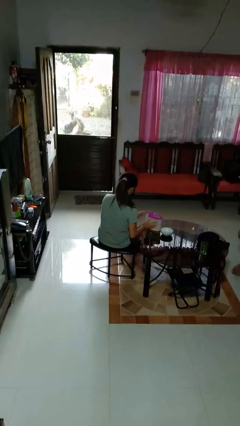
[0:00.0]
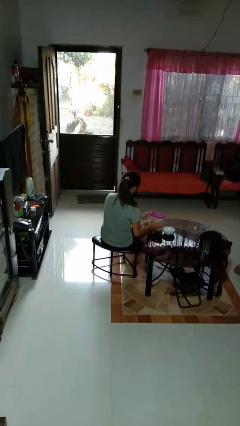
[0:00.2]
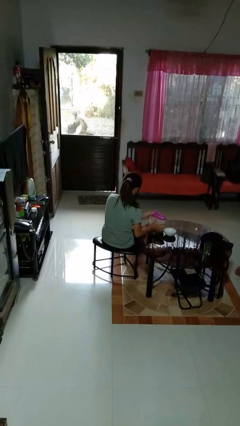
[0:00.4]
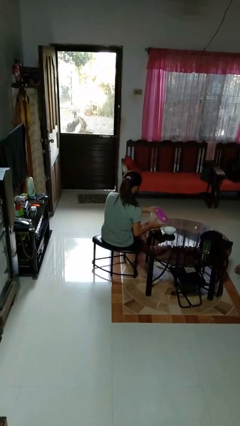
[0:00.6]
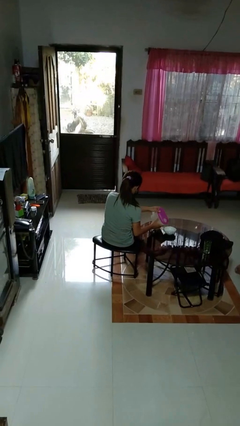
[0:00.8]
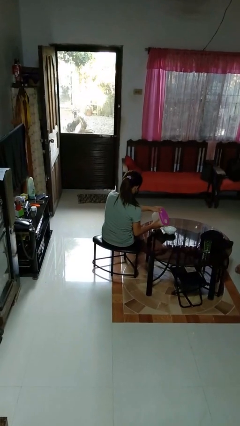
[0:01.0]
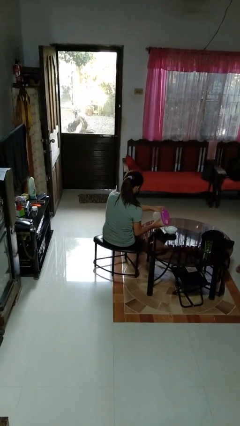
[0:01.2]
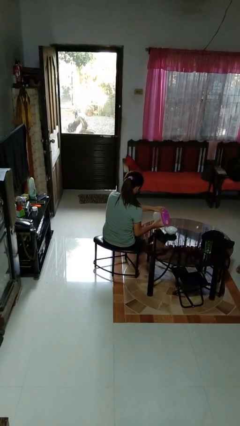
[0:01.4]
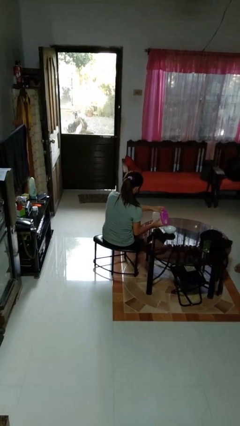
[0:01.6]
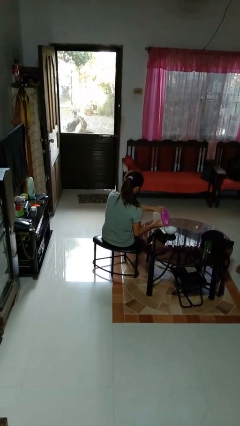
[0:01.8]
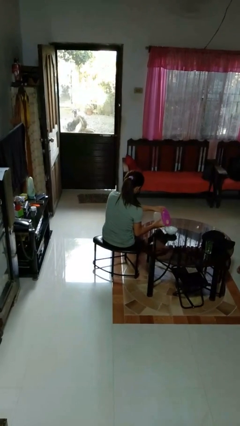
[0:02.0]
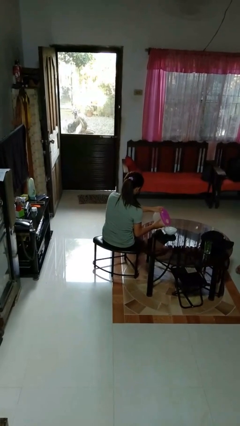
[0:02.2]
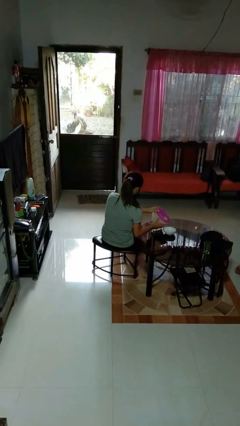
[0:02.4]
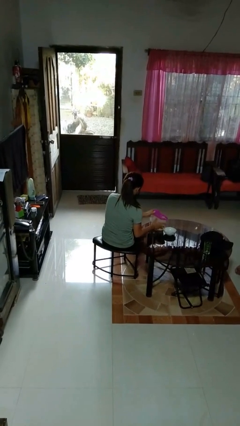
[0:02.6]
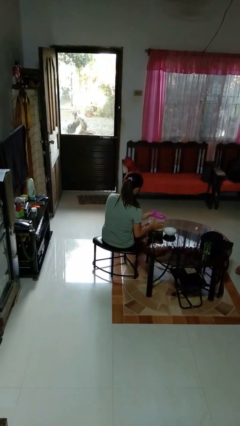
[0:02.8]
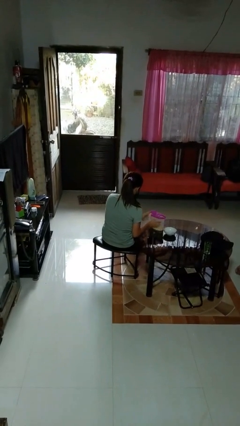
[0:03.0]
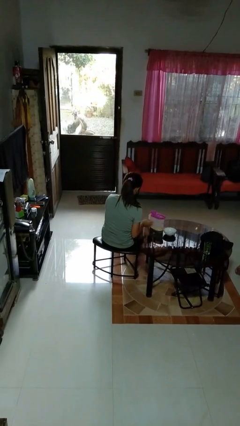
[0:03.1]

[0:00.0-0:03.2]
person pours into bowl

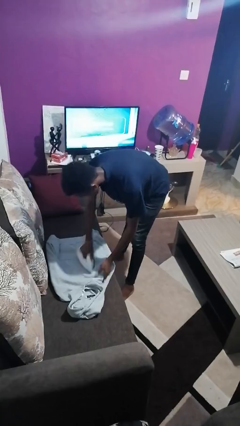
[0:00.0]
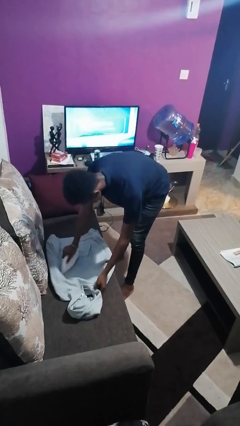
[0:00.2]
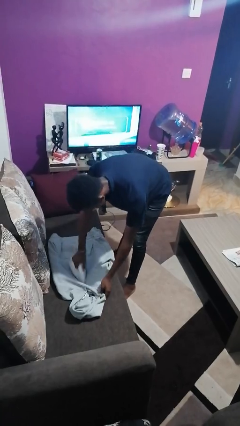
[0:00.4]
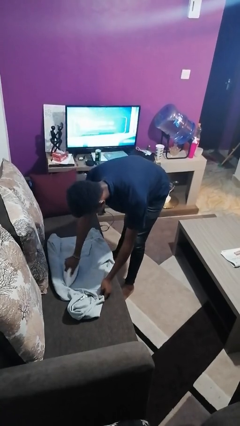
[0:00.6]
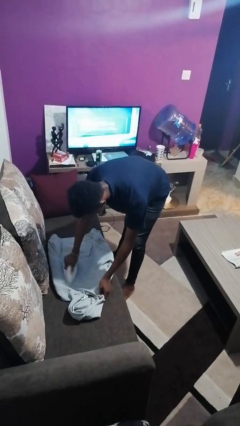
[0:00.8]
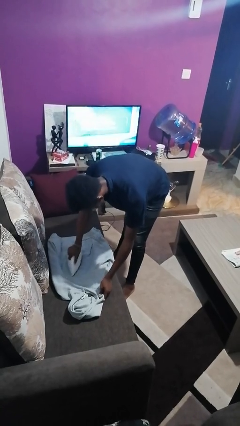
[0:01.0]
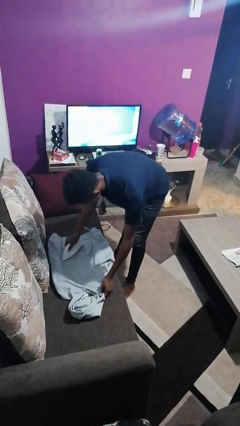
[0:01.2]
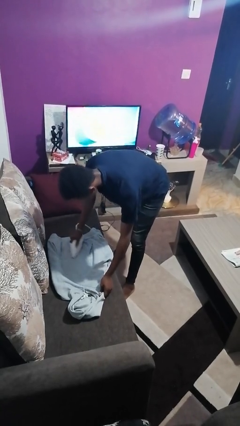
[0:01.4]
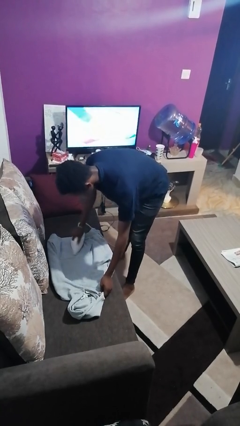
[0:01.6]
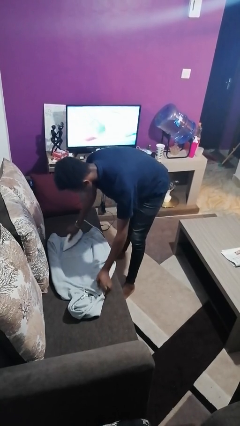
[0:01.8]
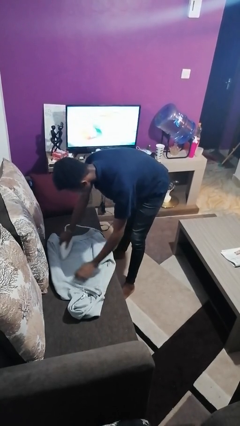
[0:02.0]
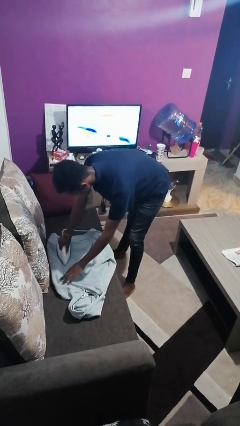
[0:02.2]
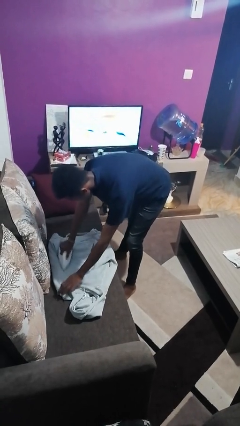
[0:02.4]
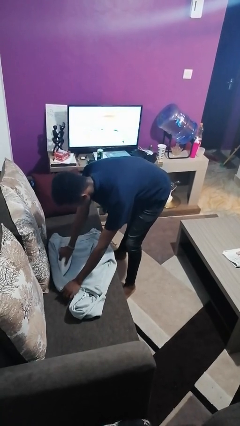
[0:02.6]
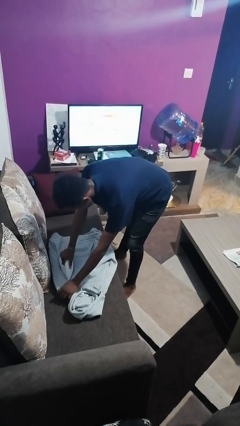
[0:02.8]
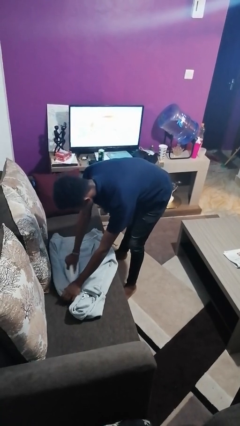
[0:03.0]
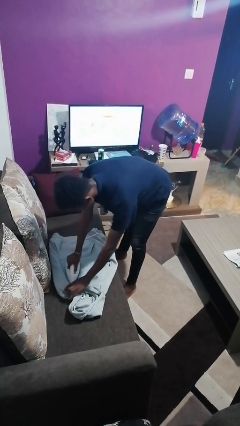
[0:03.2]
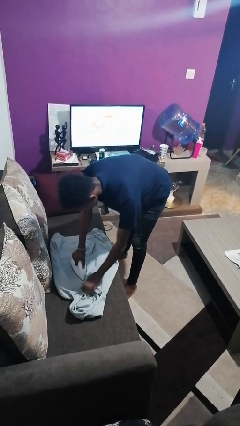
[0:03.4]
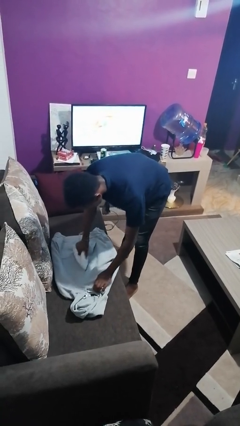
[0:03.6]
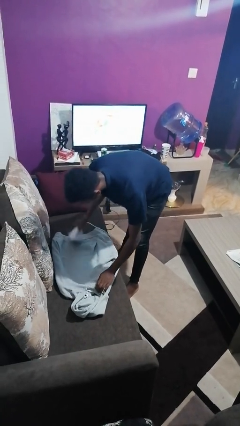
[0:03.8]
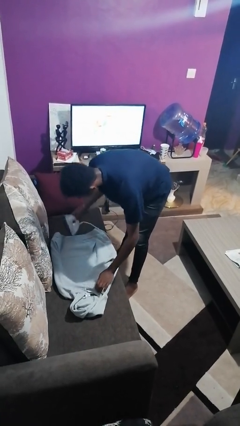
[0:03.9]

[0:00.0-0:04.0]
person irons clothes

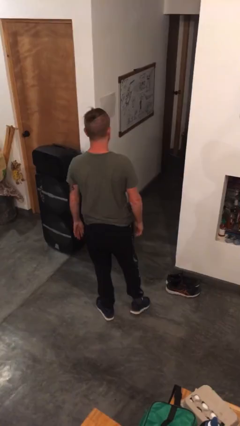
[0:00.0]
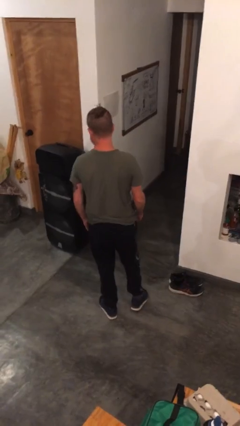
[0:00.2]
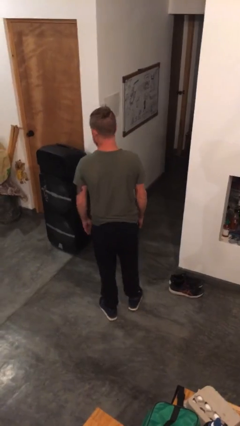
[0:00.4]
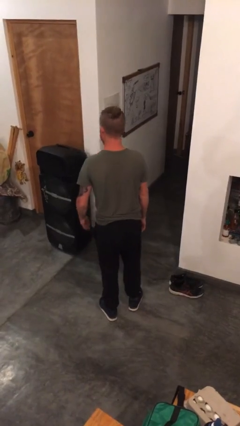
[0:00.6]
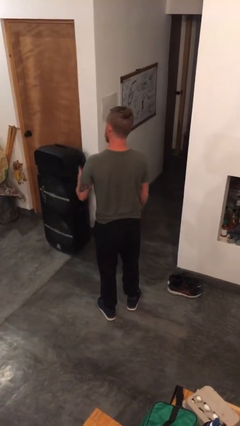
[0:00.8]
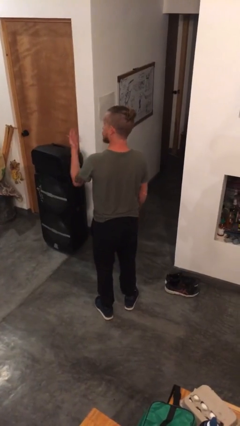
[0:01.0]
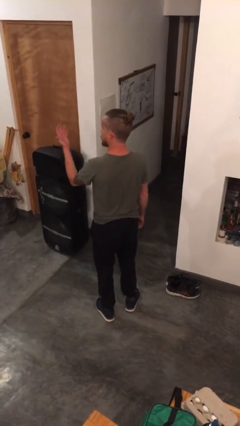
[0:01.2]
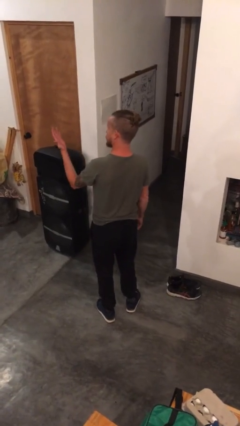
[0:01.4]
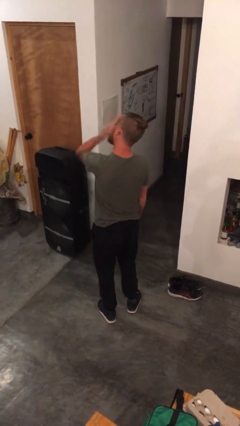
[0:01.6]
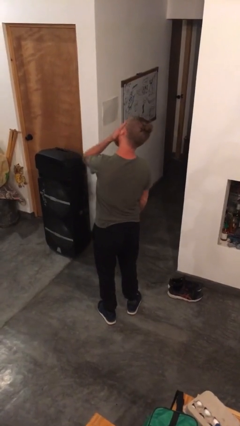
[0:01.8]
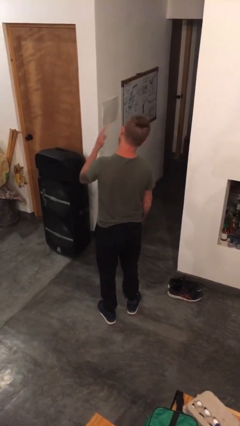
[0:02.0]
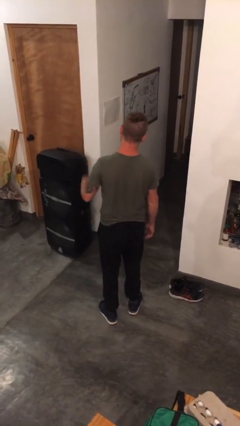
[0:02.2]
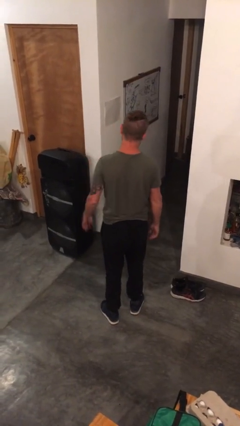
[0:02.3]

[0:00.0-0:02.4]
person swats bug

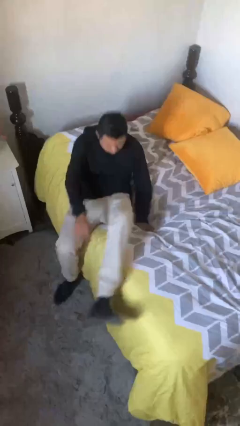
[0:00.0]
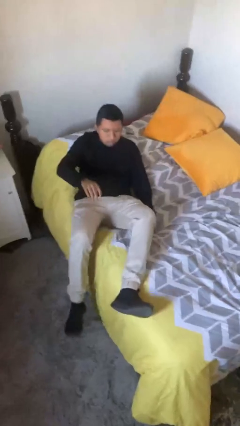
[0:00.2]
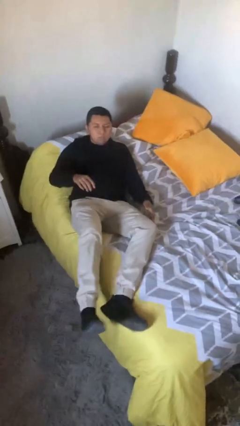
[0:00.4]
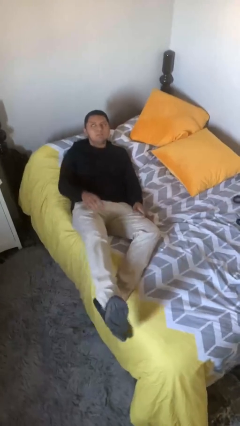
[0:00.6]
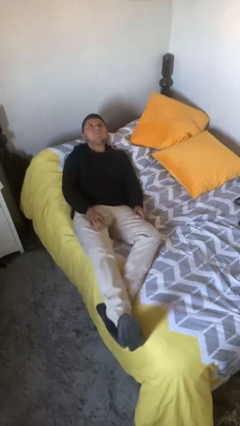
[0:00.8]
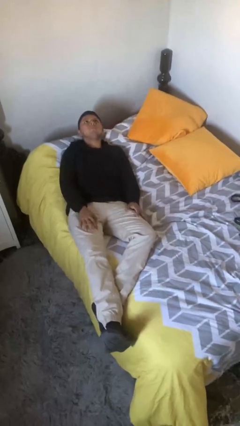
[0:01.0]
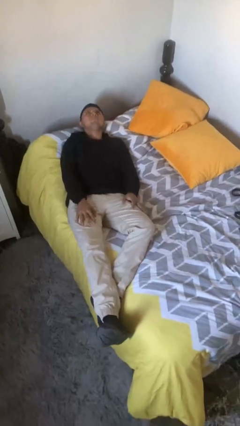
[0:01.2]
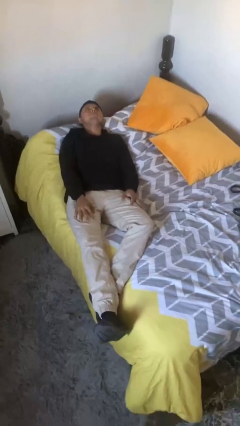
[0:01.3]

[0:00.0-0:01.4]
person lies down on bed

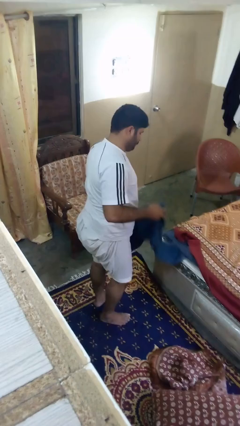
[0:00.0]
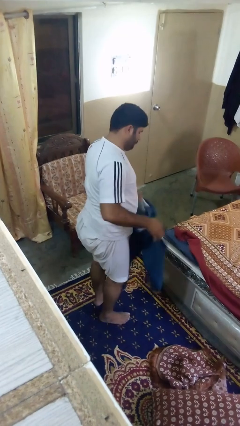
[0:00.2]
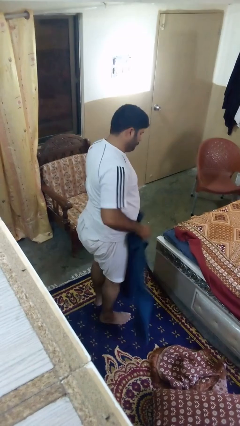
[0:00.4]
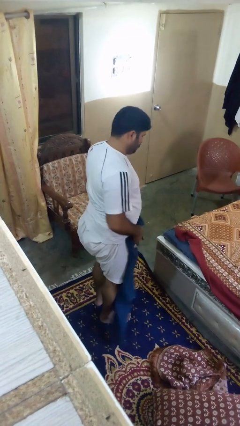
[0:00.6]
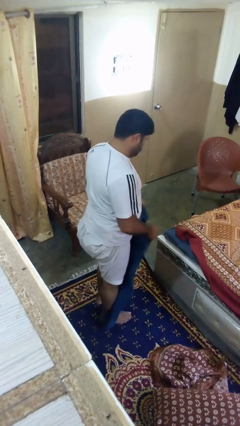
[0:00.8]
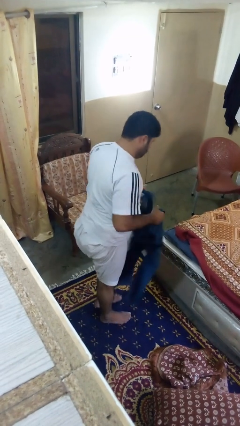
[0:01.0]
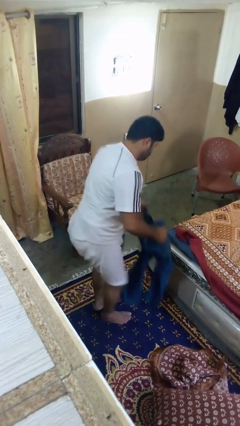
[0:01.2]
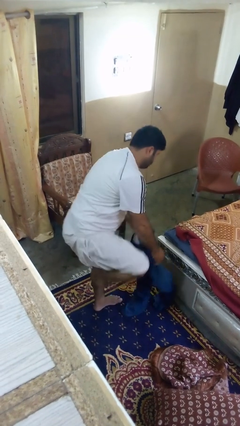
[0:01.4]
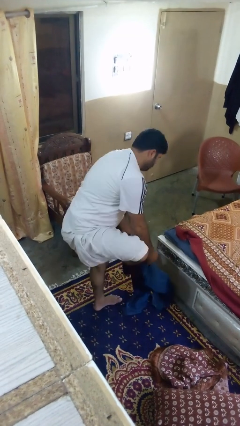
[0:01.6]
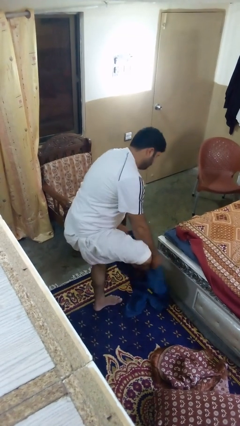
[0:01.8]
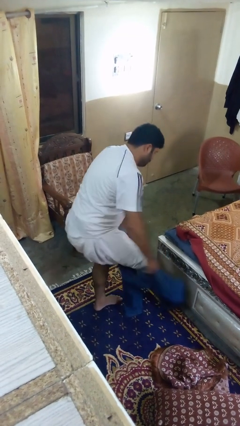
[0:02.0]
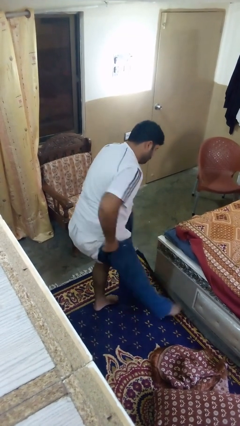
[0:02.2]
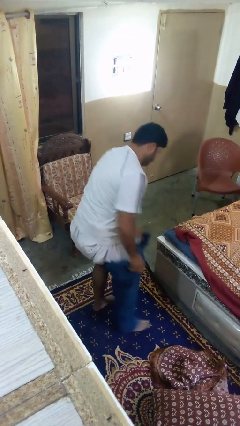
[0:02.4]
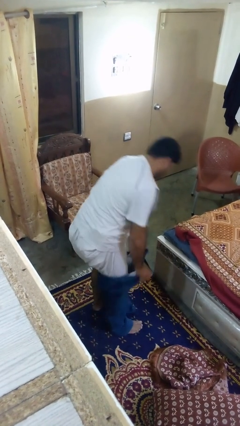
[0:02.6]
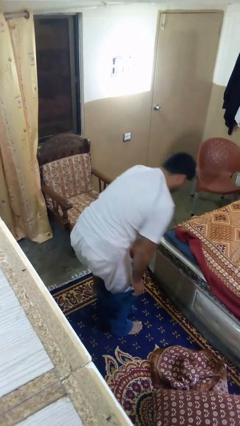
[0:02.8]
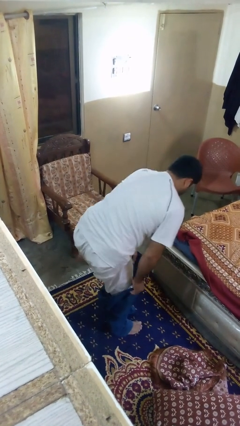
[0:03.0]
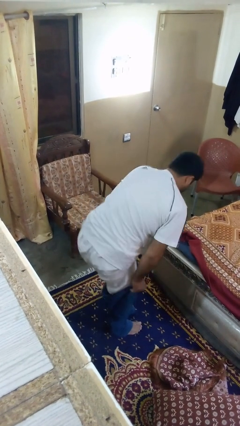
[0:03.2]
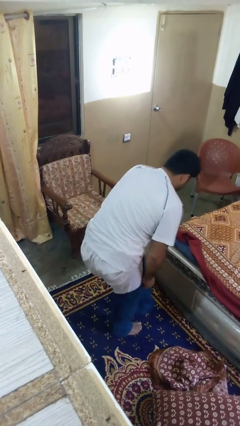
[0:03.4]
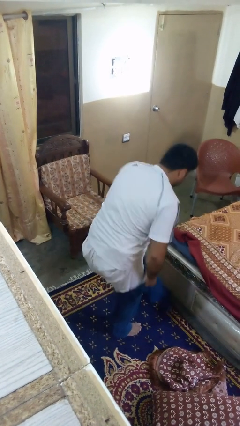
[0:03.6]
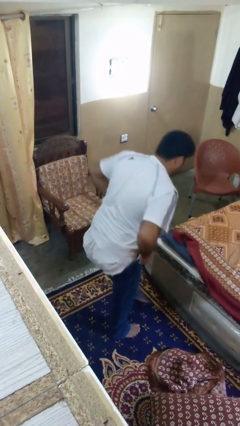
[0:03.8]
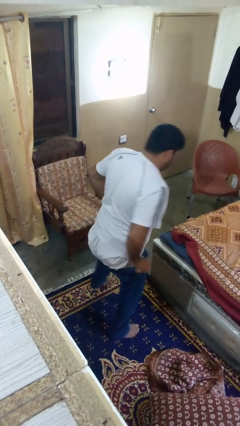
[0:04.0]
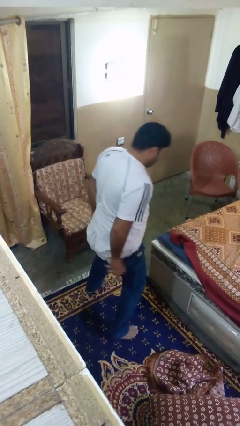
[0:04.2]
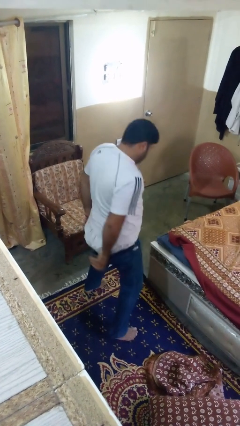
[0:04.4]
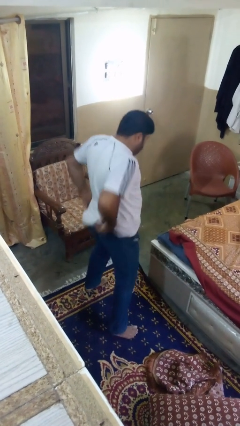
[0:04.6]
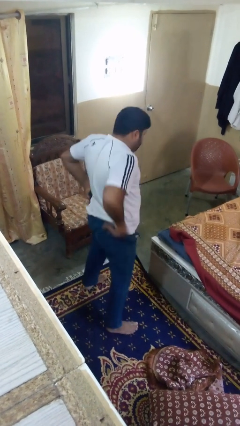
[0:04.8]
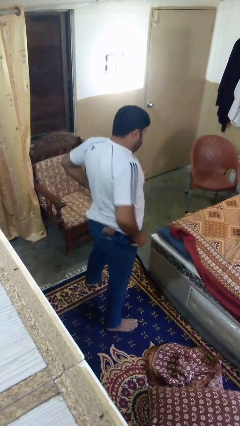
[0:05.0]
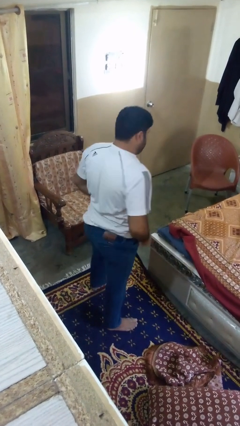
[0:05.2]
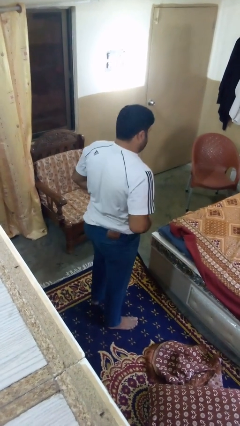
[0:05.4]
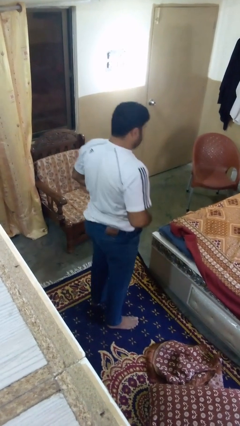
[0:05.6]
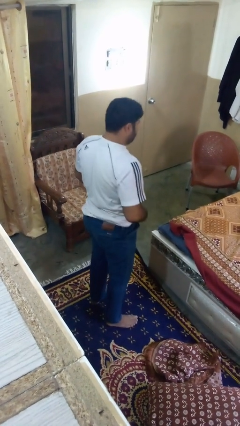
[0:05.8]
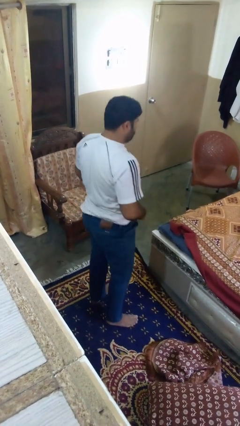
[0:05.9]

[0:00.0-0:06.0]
person puts on pants

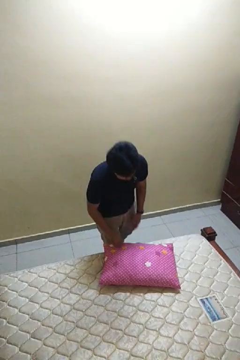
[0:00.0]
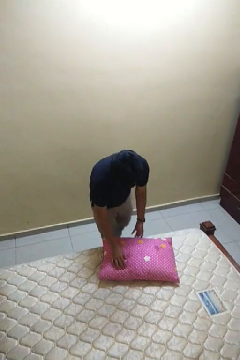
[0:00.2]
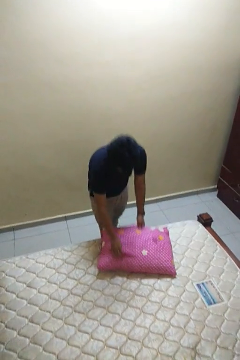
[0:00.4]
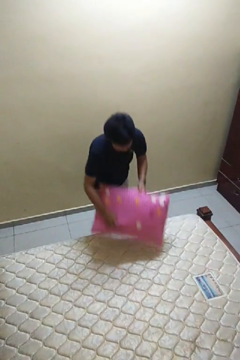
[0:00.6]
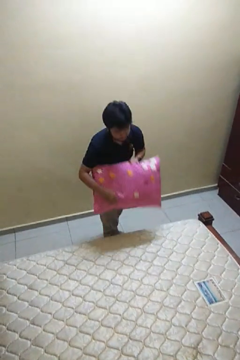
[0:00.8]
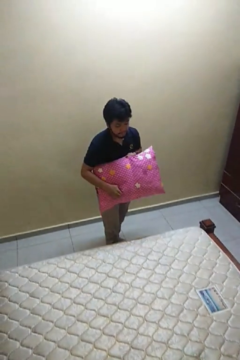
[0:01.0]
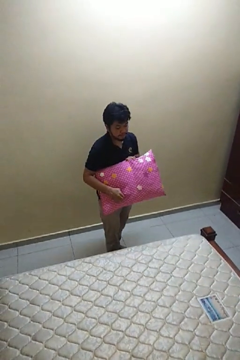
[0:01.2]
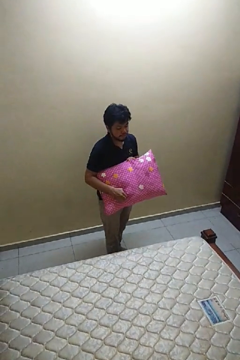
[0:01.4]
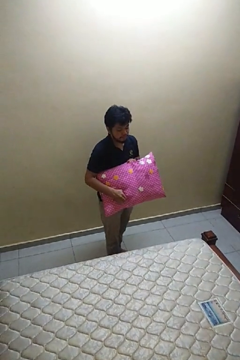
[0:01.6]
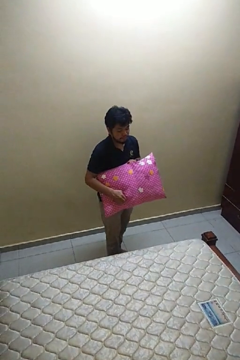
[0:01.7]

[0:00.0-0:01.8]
person picks up object from bed